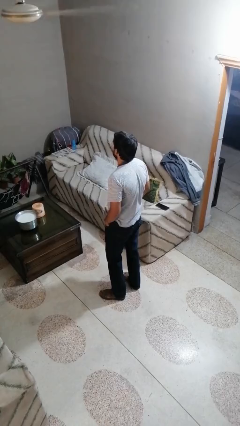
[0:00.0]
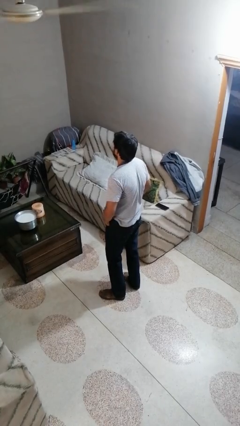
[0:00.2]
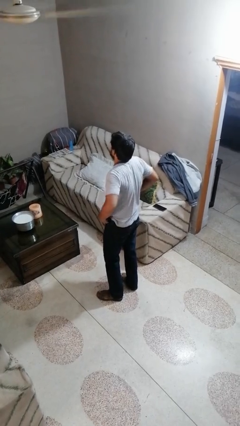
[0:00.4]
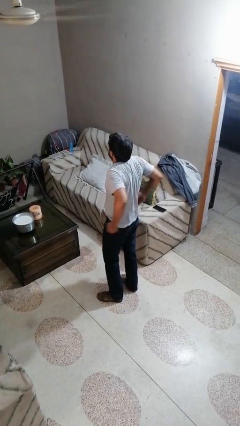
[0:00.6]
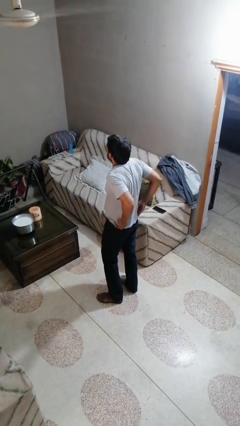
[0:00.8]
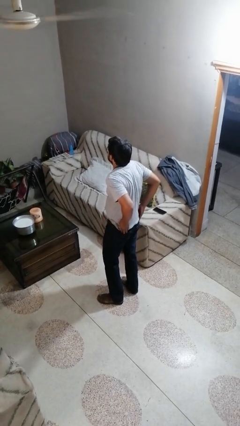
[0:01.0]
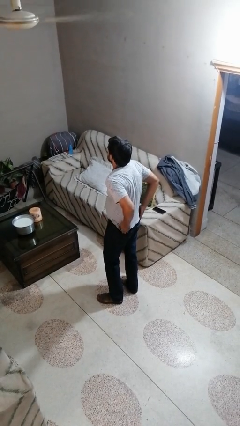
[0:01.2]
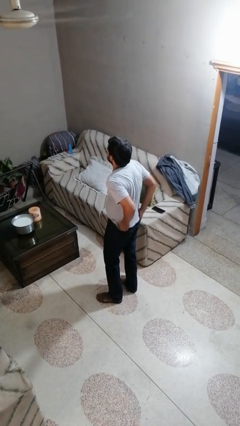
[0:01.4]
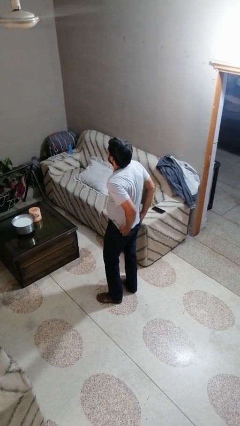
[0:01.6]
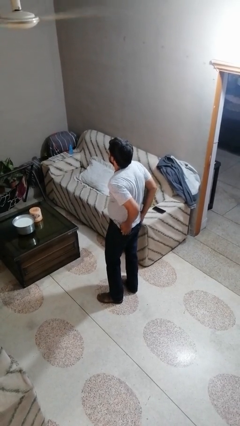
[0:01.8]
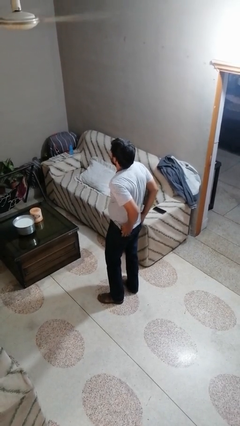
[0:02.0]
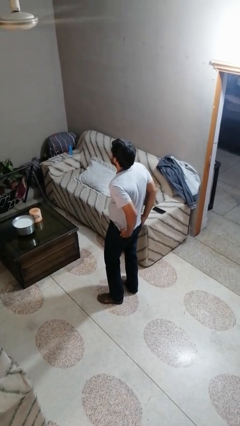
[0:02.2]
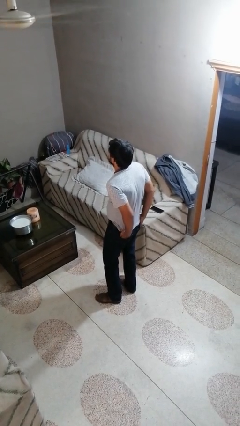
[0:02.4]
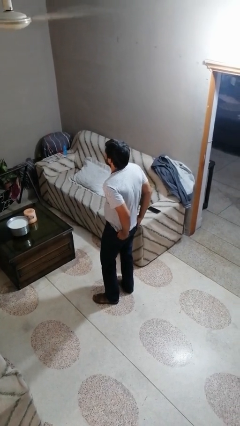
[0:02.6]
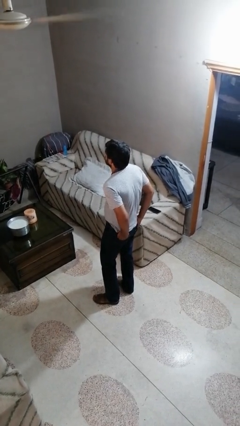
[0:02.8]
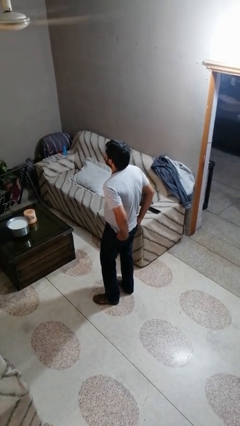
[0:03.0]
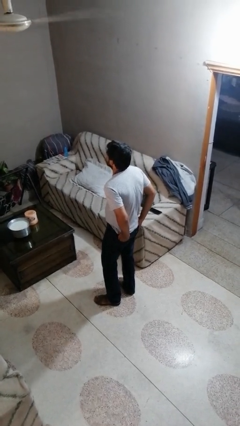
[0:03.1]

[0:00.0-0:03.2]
person puts hands in back pockets

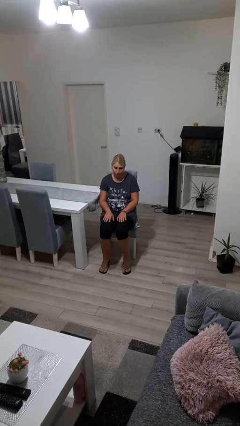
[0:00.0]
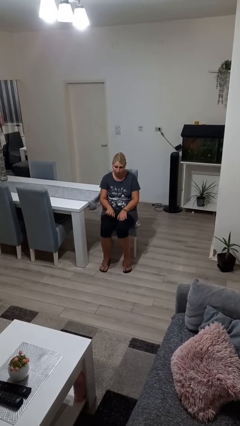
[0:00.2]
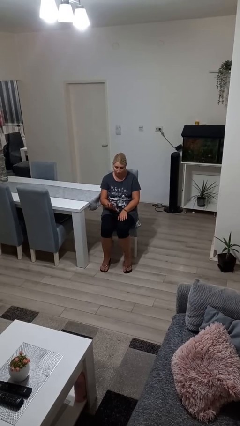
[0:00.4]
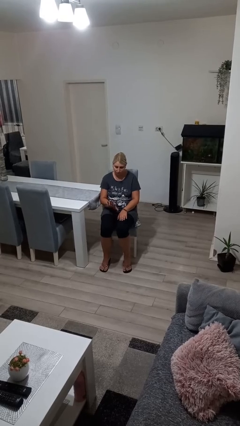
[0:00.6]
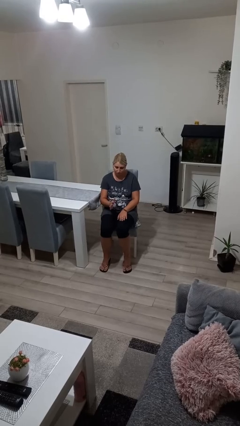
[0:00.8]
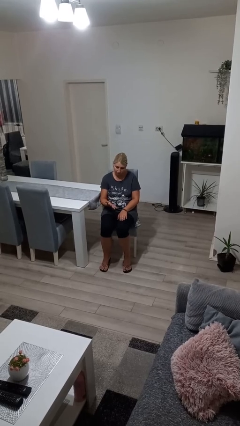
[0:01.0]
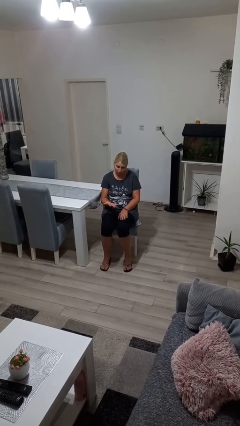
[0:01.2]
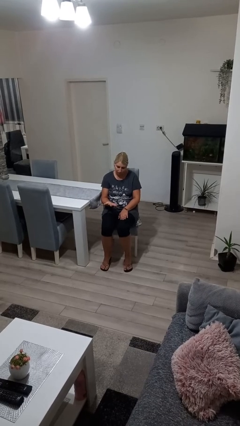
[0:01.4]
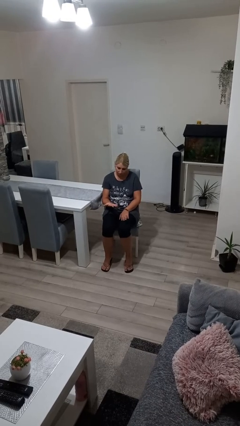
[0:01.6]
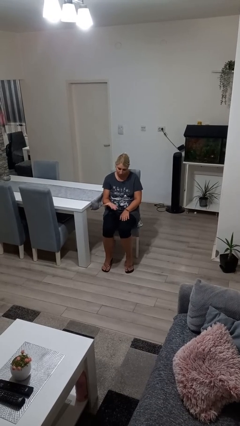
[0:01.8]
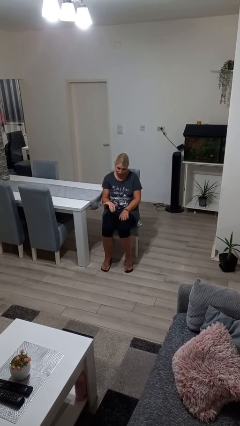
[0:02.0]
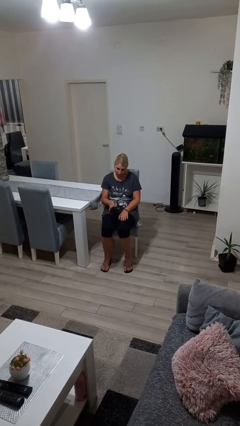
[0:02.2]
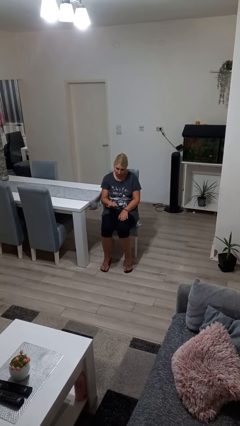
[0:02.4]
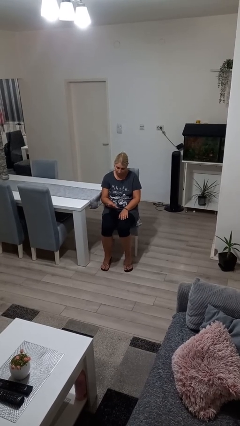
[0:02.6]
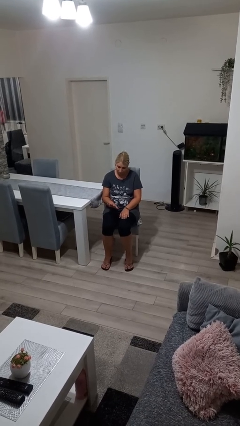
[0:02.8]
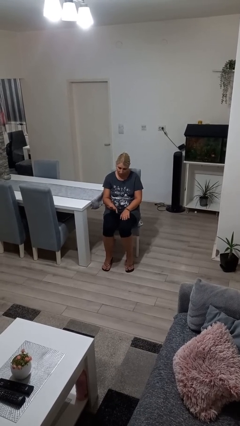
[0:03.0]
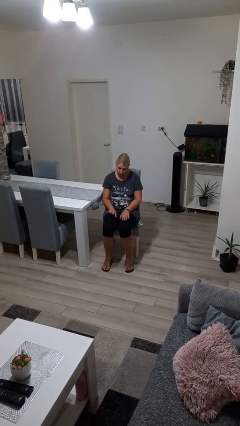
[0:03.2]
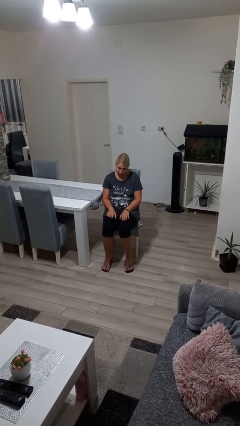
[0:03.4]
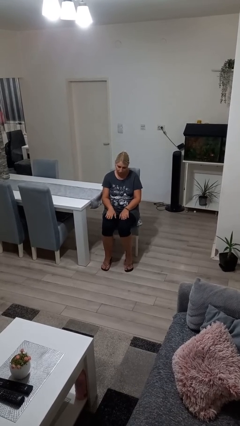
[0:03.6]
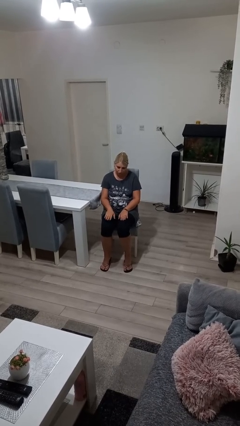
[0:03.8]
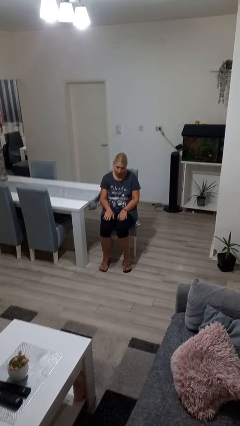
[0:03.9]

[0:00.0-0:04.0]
person looks at hands in lap

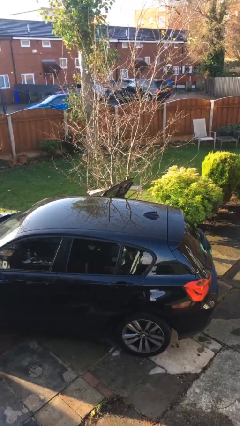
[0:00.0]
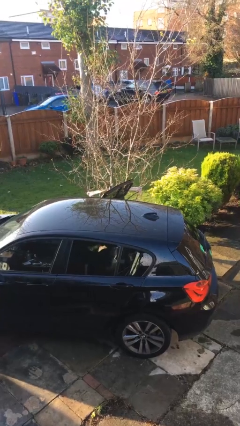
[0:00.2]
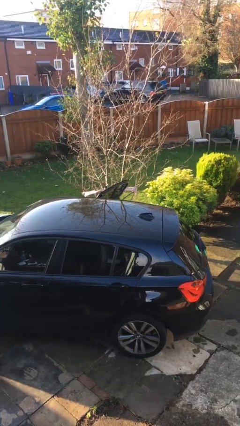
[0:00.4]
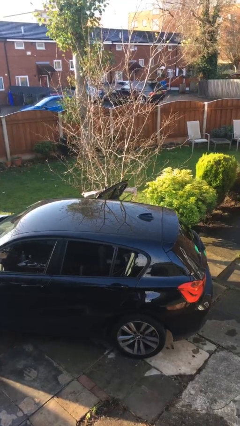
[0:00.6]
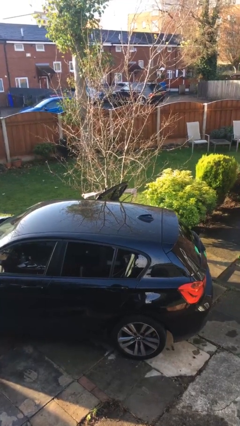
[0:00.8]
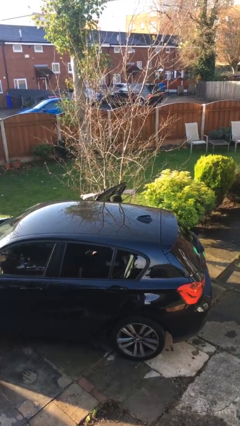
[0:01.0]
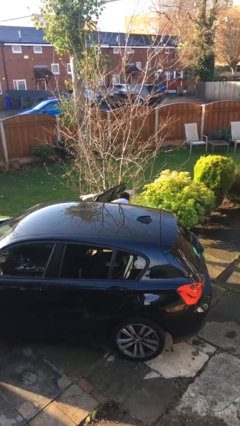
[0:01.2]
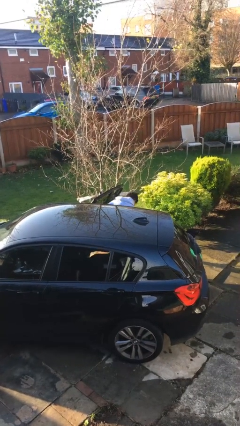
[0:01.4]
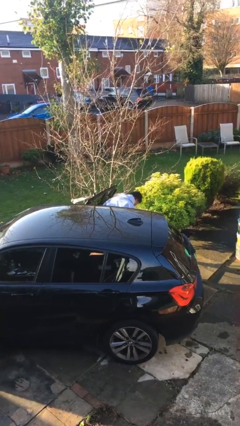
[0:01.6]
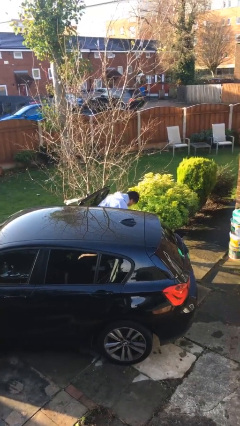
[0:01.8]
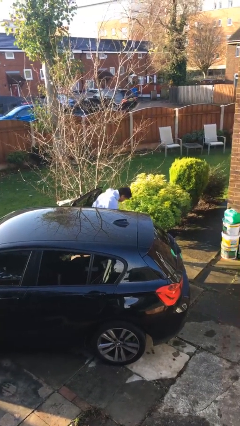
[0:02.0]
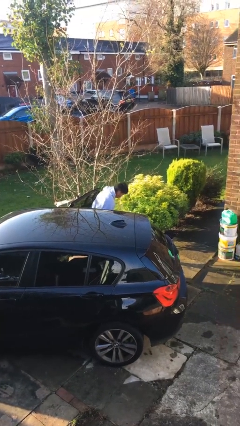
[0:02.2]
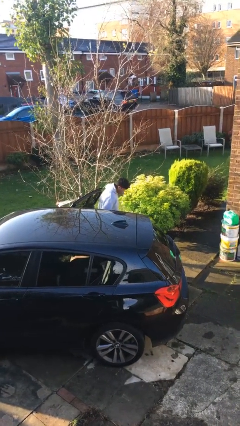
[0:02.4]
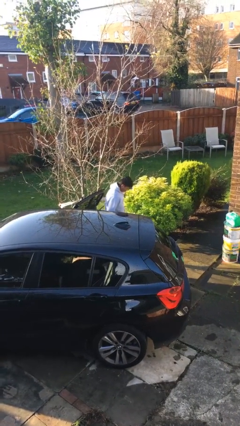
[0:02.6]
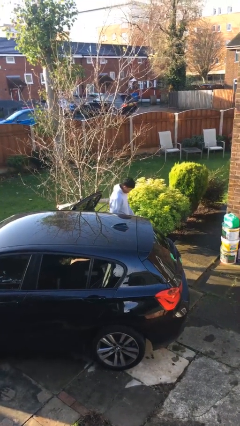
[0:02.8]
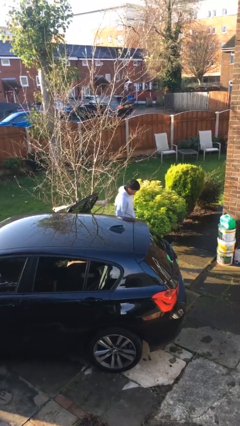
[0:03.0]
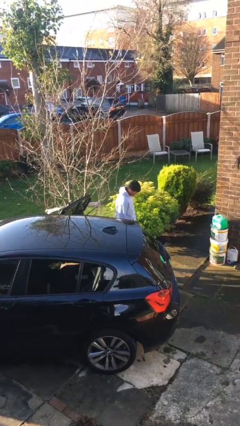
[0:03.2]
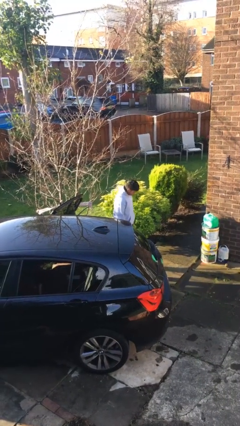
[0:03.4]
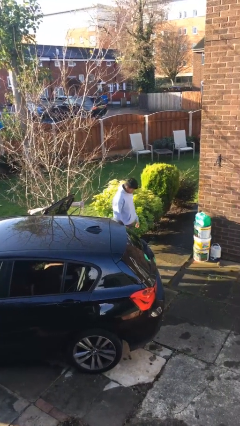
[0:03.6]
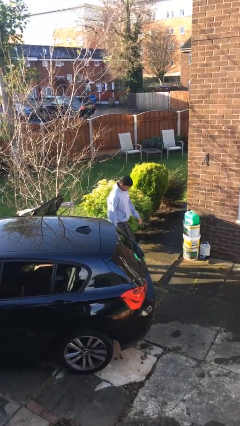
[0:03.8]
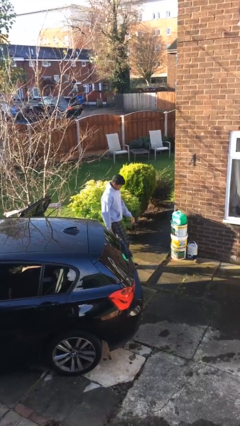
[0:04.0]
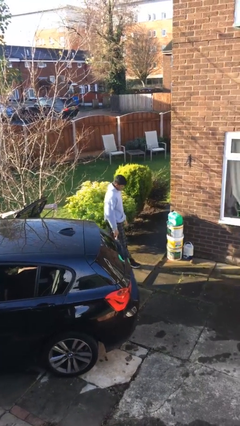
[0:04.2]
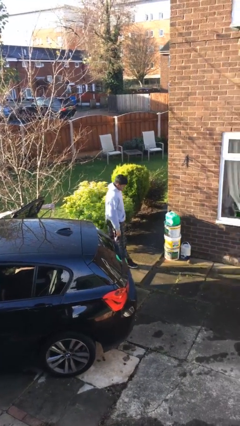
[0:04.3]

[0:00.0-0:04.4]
person exits car

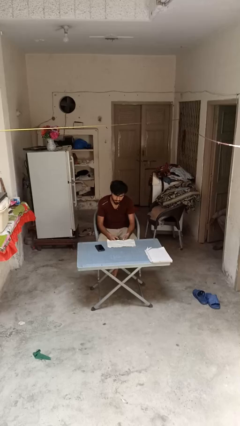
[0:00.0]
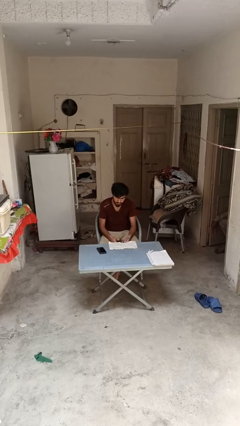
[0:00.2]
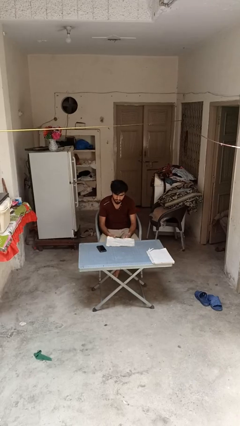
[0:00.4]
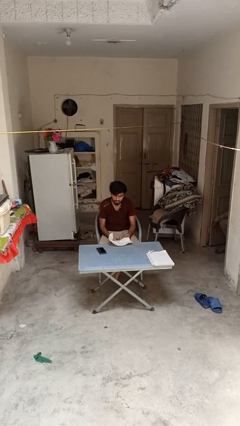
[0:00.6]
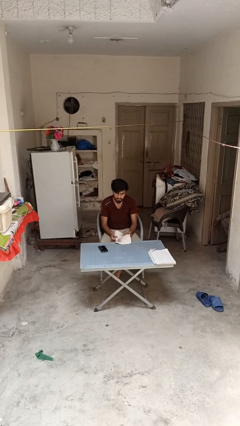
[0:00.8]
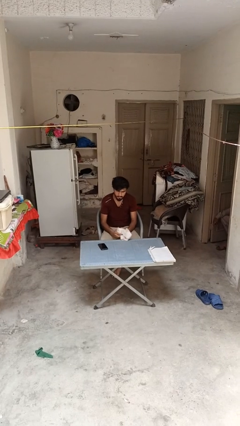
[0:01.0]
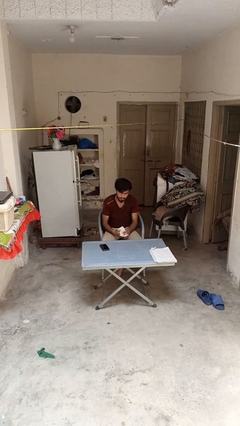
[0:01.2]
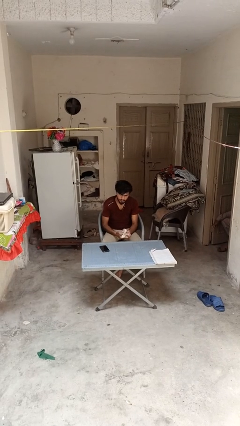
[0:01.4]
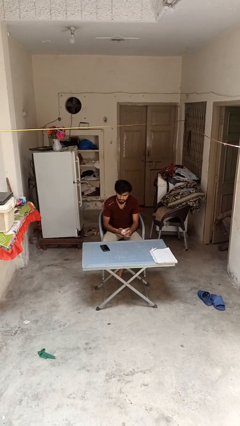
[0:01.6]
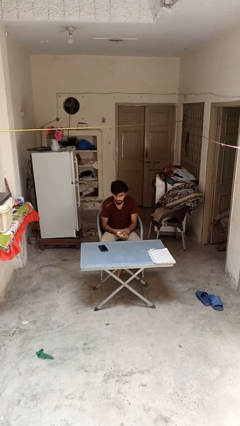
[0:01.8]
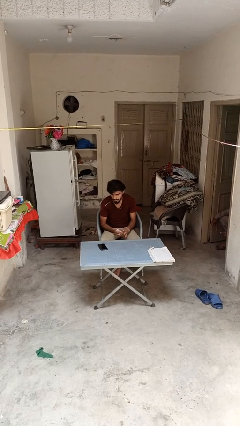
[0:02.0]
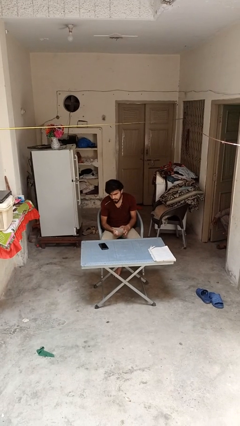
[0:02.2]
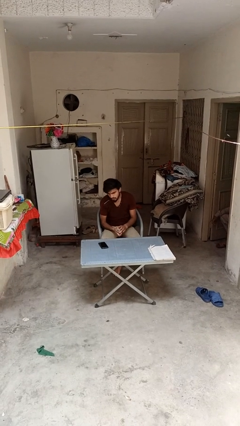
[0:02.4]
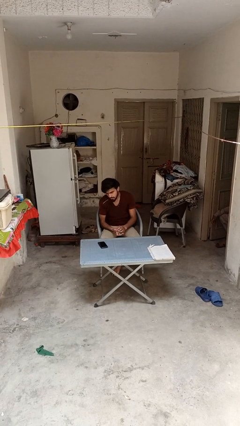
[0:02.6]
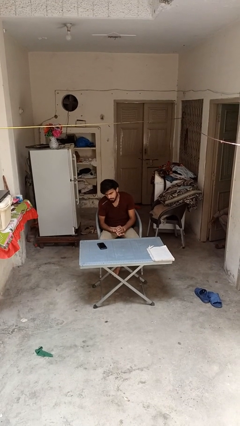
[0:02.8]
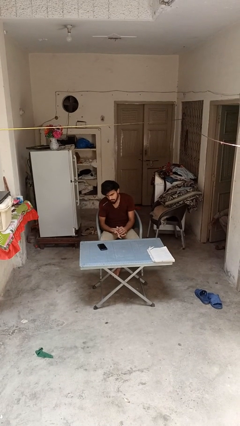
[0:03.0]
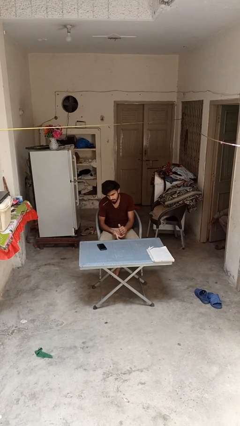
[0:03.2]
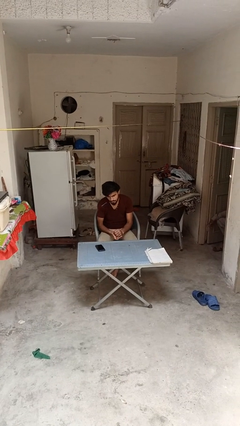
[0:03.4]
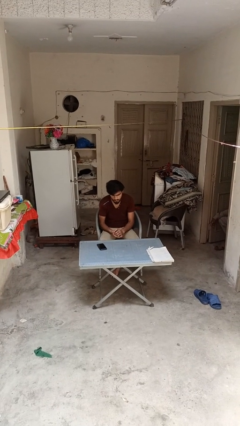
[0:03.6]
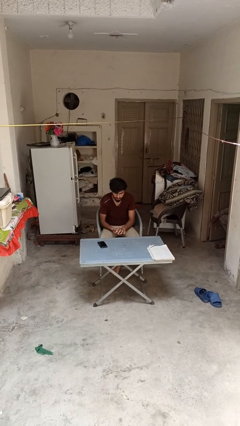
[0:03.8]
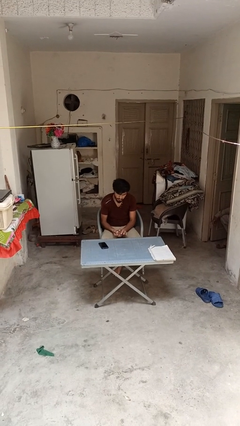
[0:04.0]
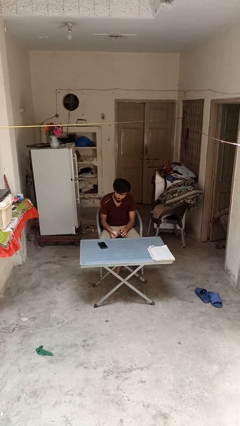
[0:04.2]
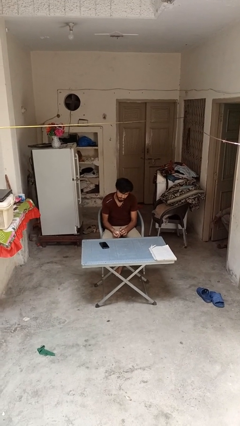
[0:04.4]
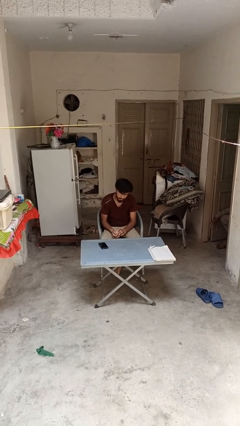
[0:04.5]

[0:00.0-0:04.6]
person crumples paper

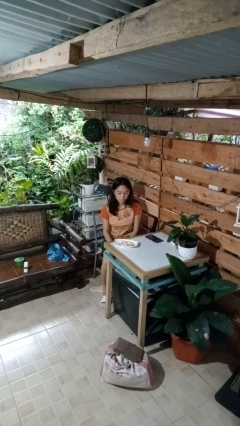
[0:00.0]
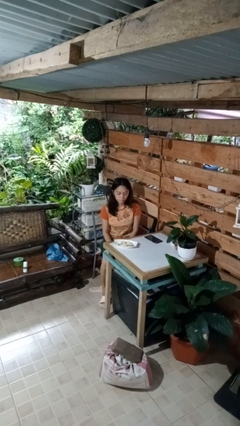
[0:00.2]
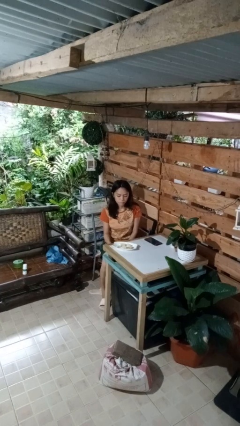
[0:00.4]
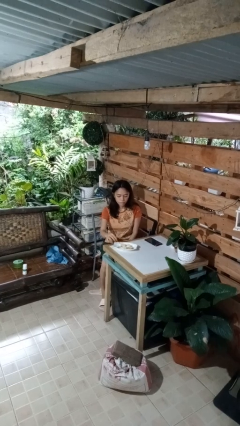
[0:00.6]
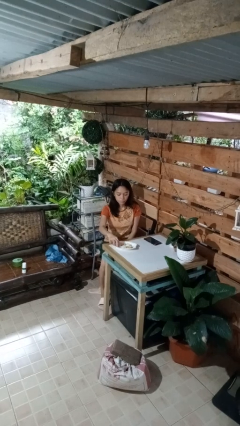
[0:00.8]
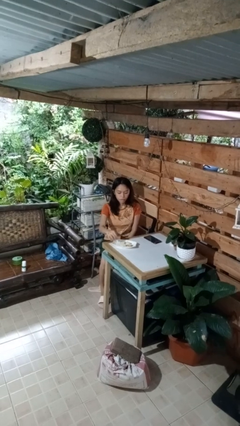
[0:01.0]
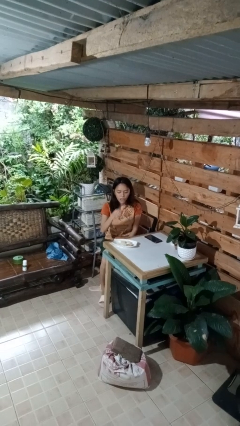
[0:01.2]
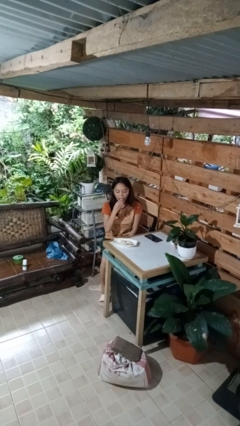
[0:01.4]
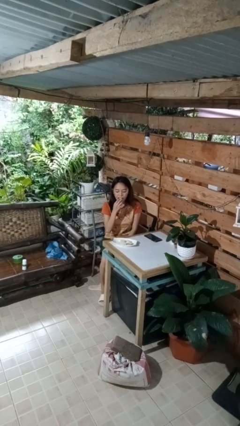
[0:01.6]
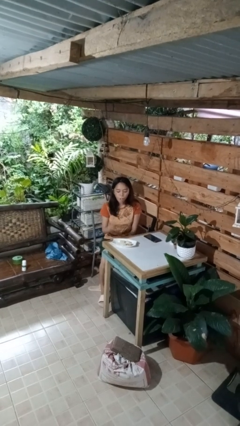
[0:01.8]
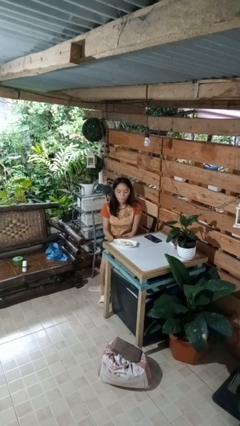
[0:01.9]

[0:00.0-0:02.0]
person eats with hands
